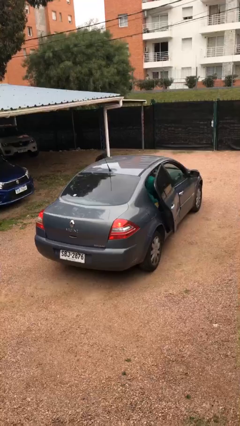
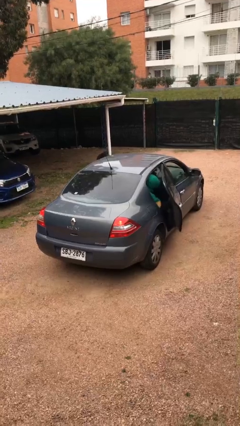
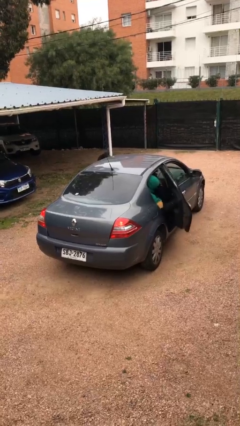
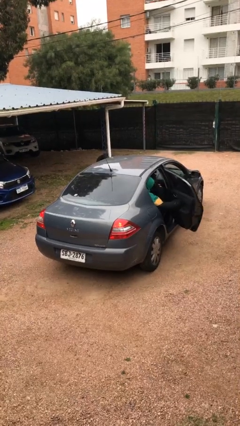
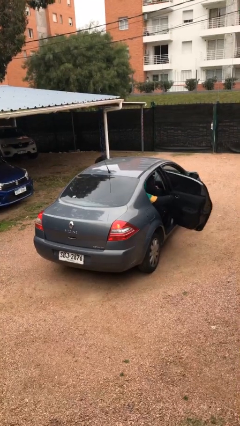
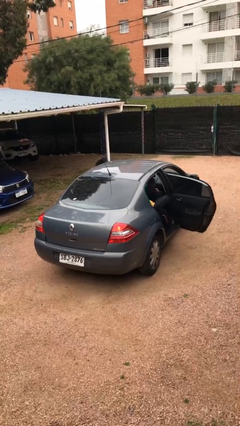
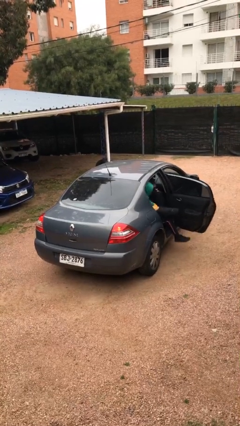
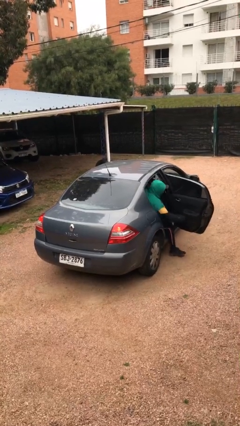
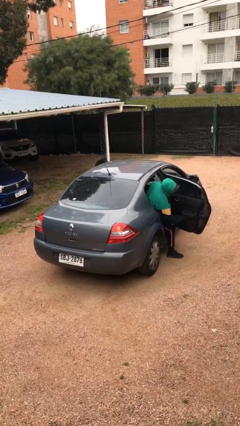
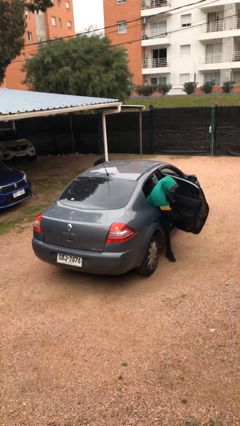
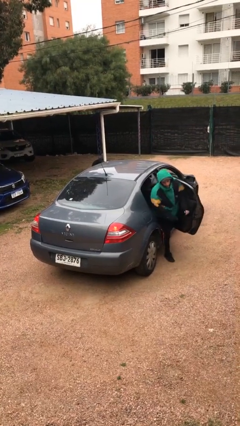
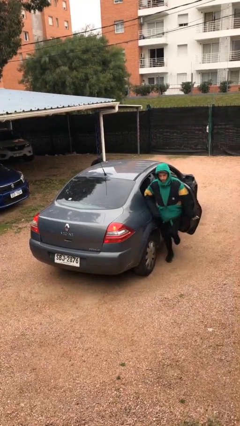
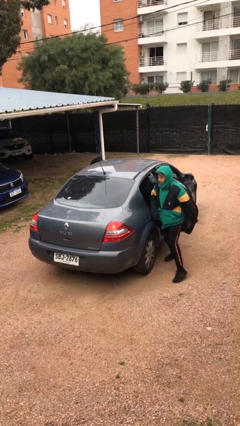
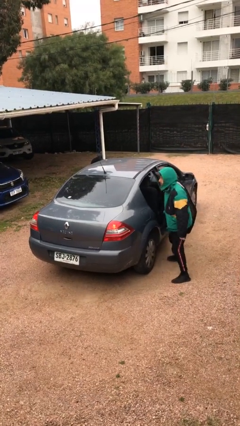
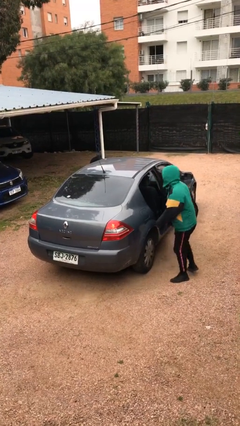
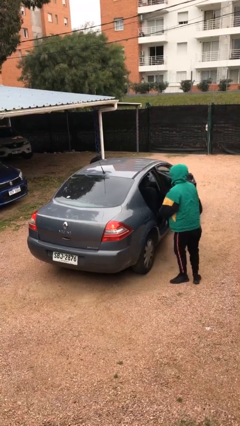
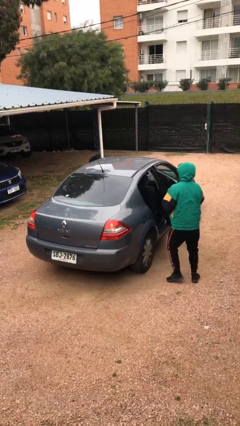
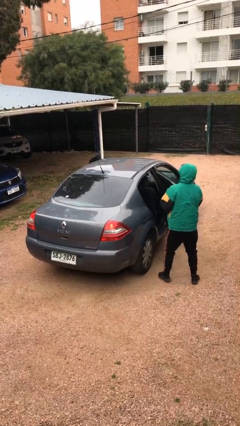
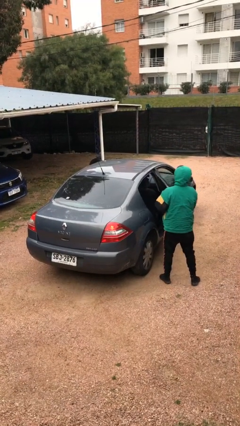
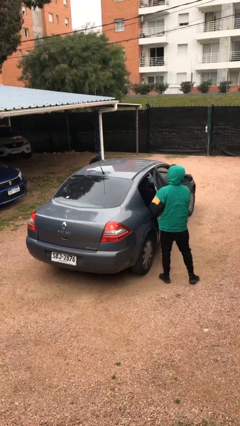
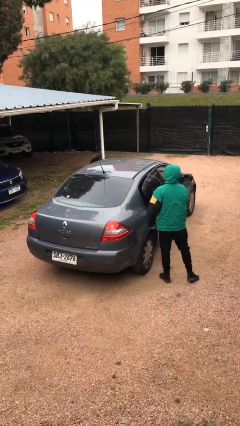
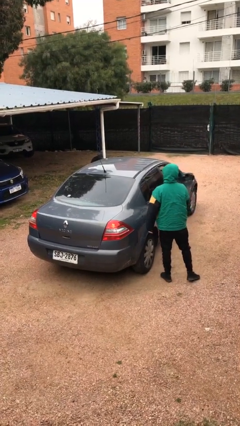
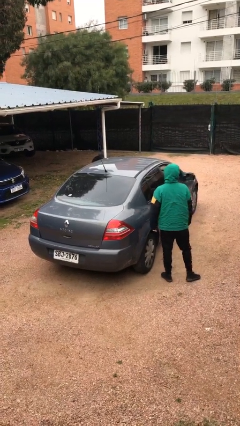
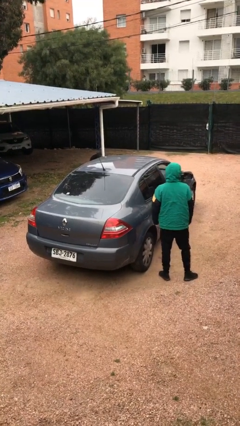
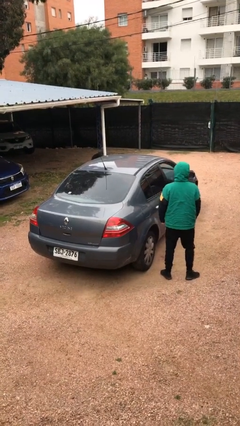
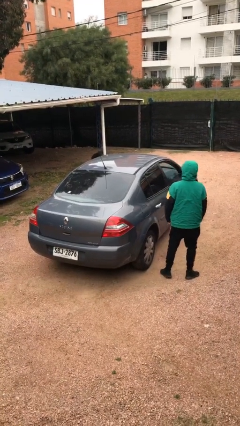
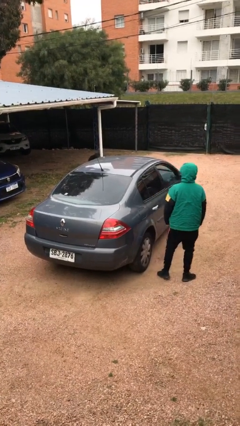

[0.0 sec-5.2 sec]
car drops off person

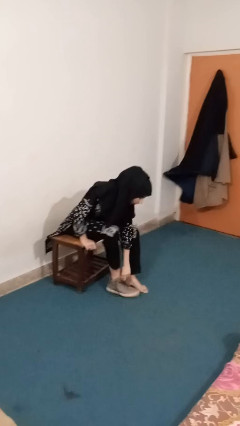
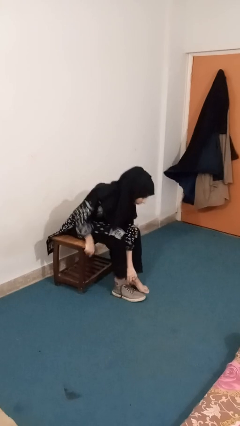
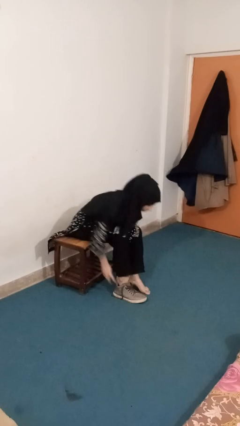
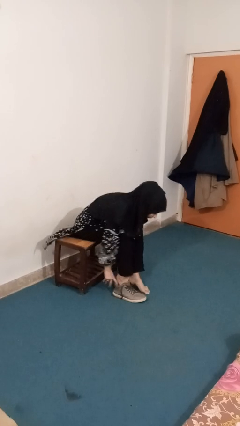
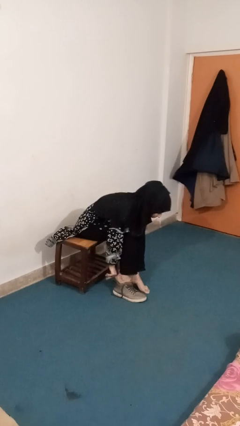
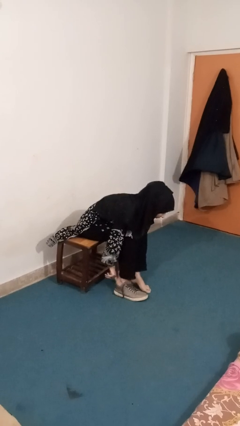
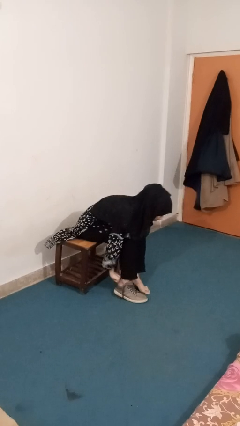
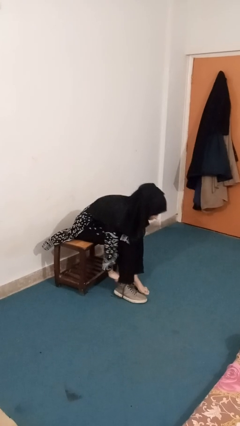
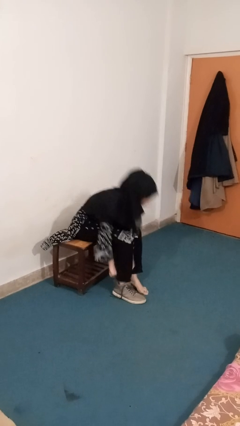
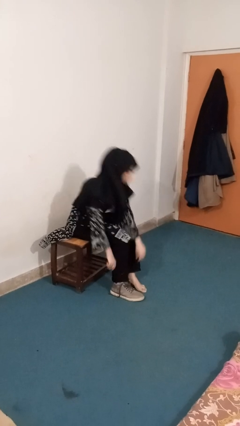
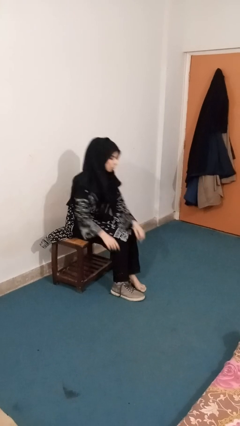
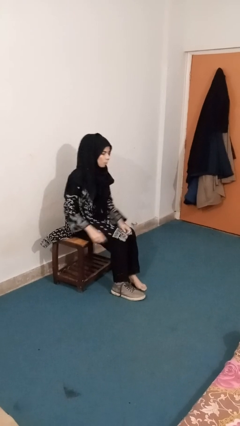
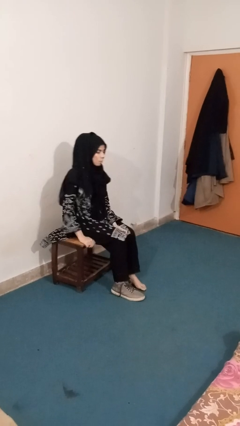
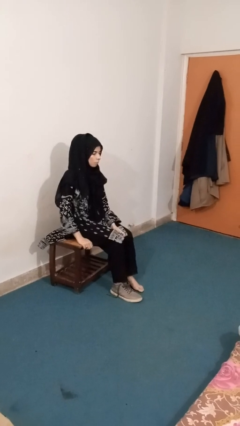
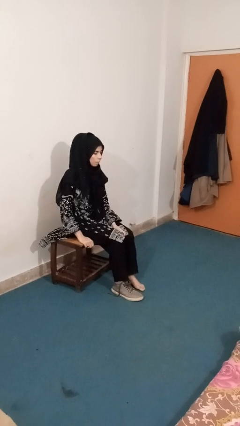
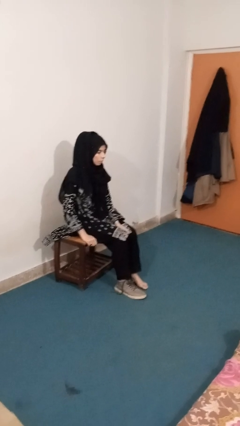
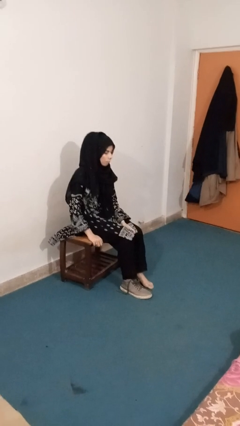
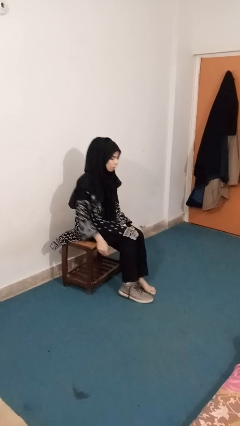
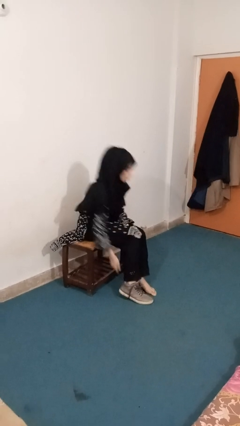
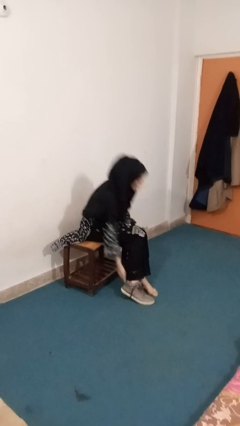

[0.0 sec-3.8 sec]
person puts on boots

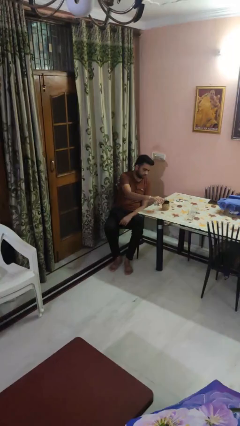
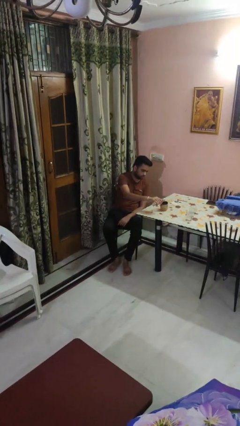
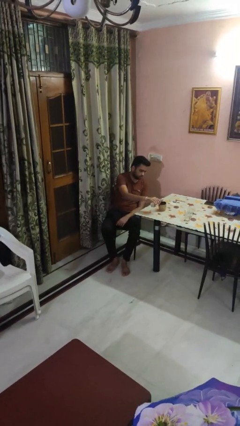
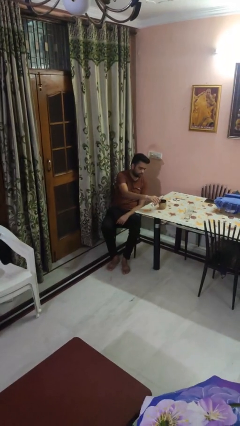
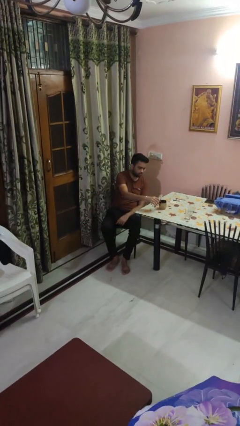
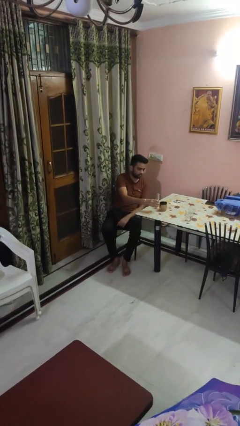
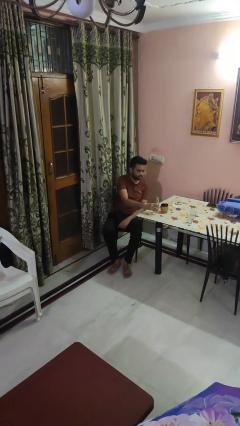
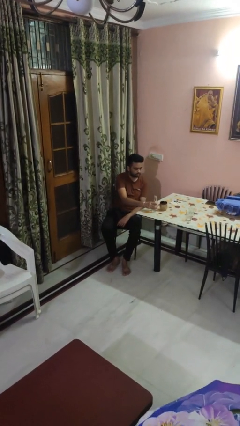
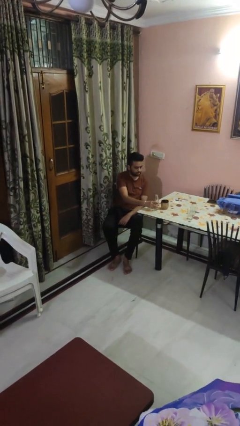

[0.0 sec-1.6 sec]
person pours liquid into cup

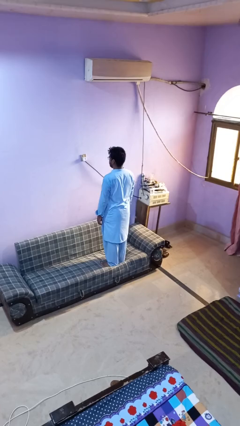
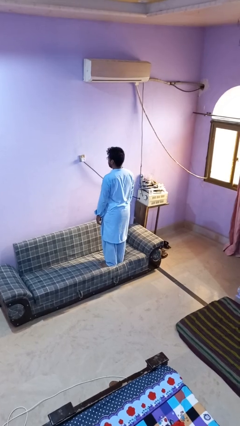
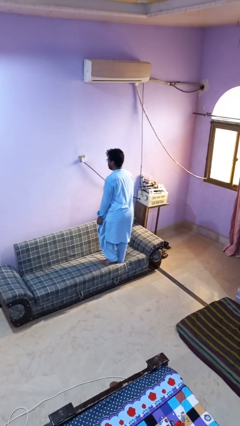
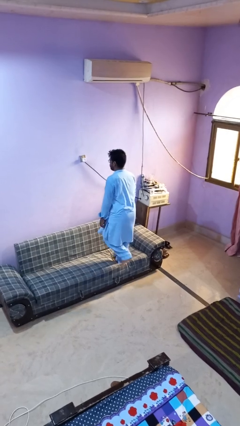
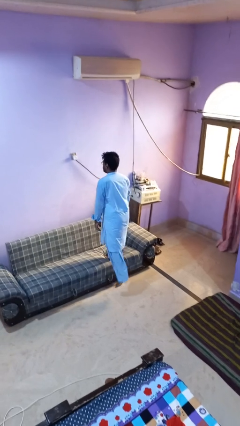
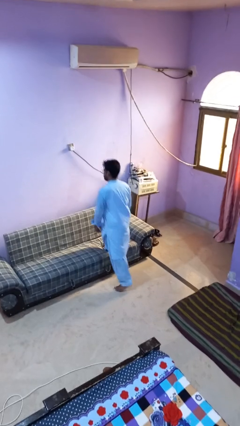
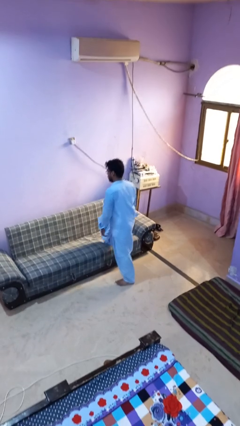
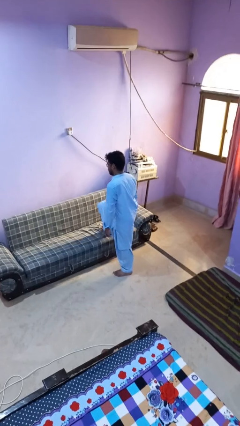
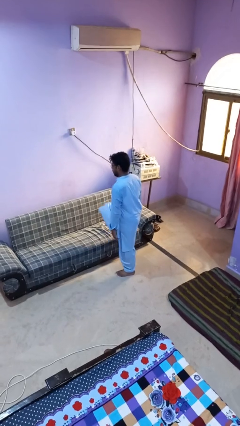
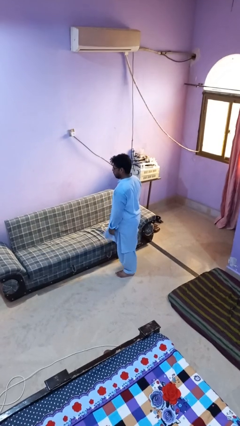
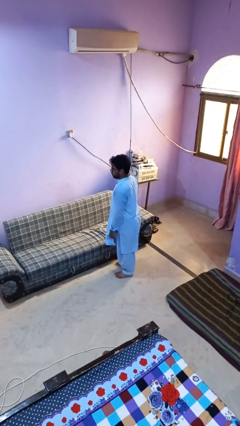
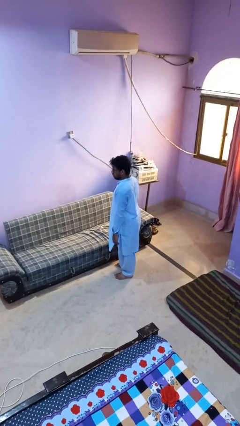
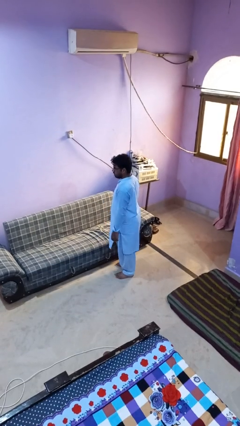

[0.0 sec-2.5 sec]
person climbs off couch

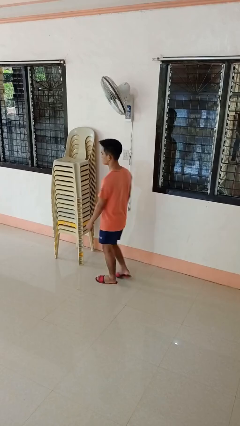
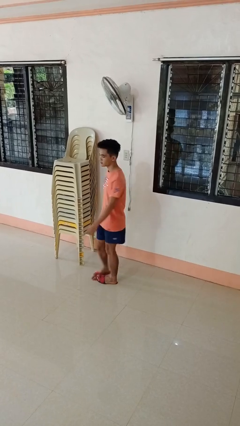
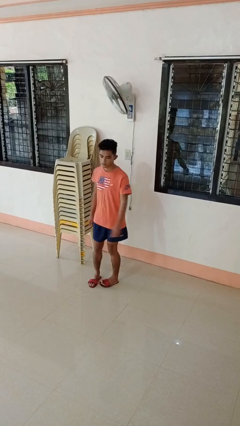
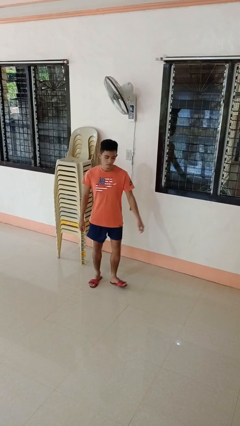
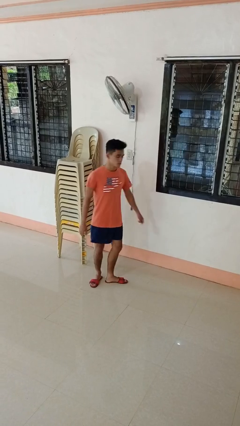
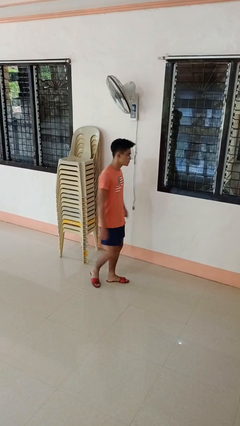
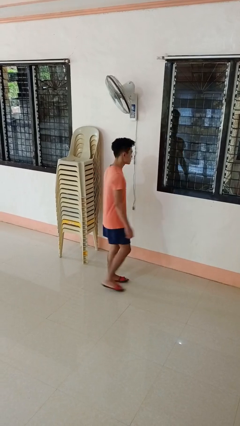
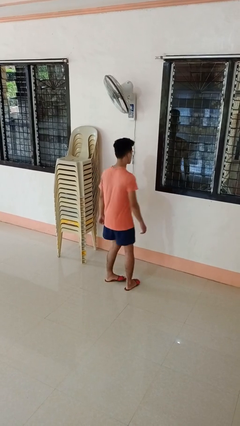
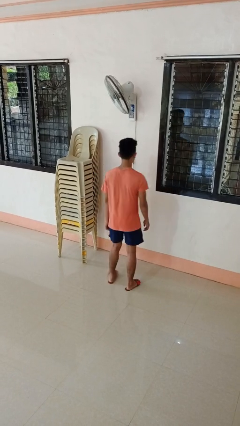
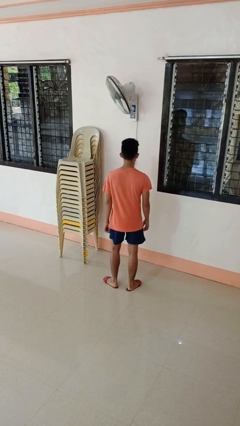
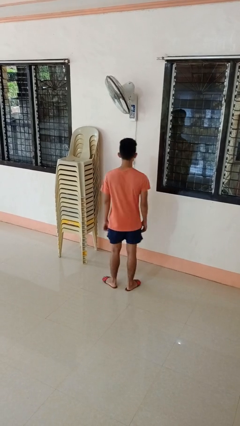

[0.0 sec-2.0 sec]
person twirls

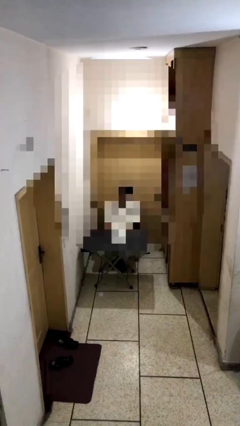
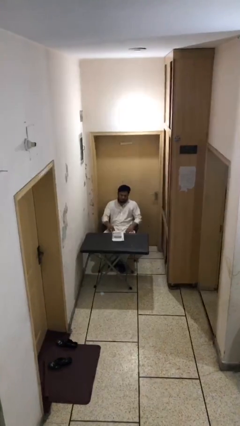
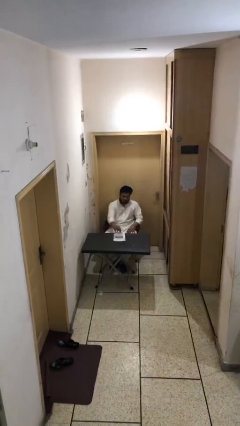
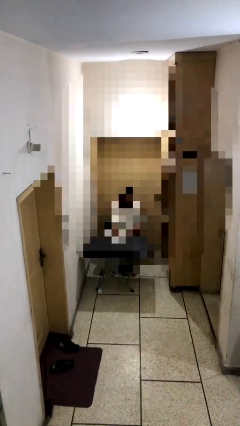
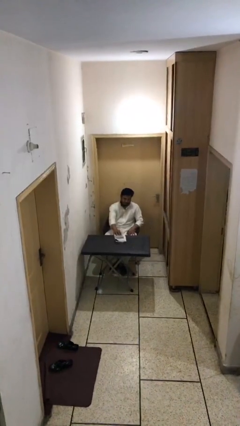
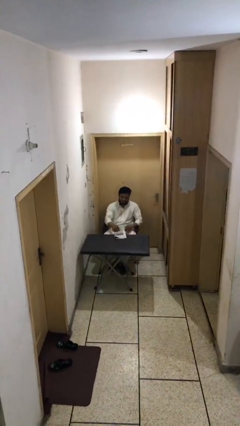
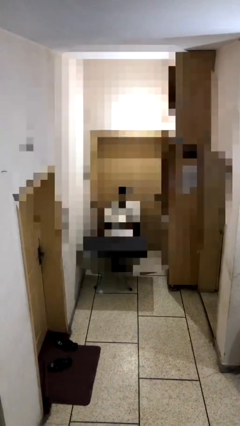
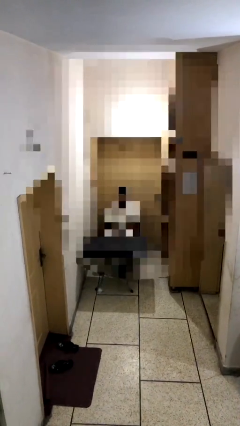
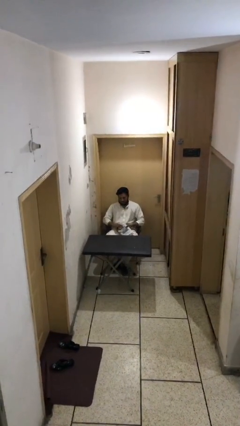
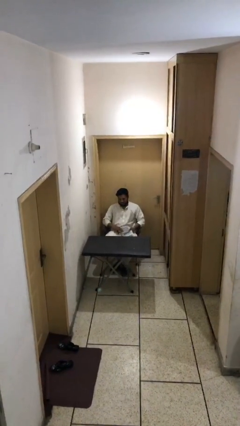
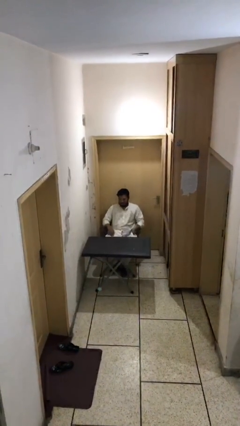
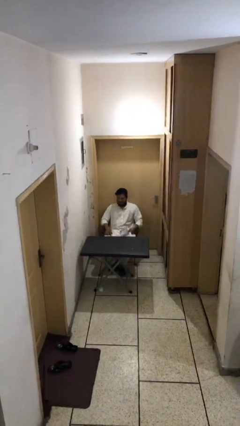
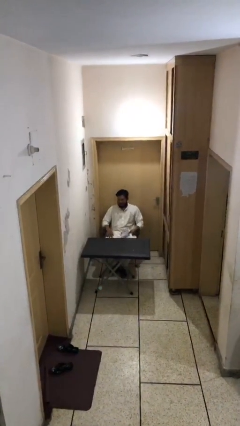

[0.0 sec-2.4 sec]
person picks up object from table
